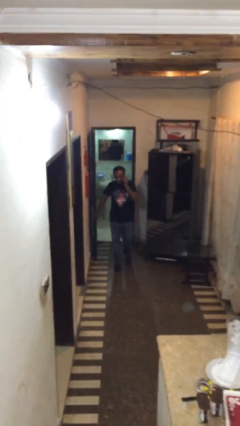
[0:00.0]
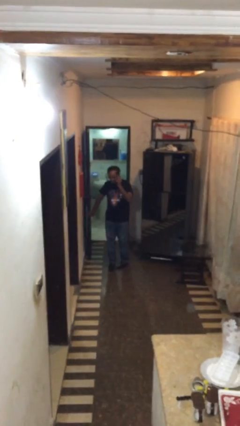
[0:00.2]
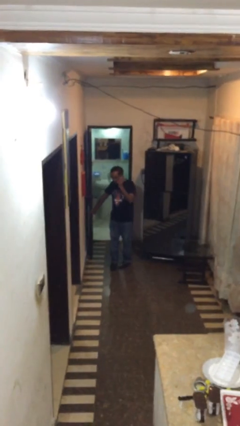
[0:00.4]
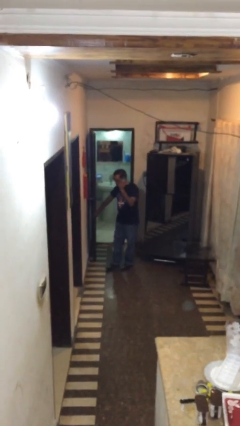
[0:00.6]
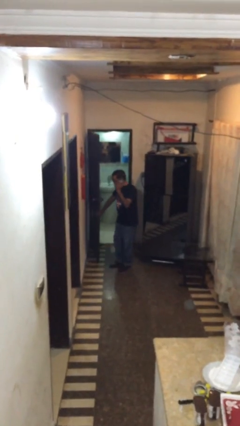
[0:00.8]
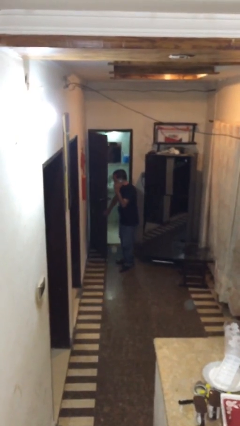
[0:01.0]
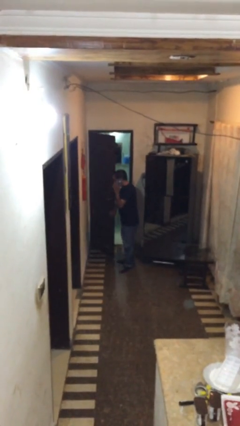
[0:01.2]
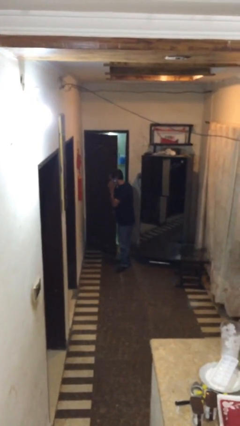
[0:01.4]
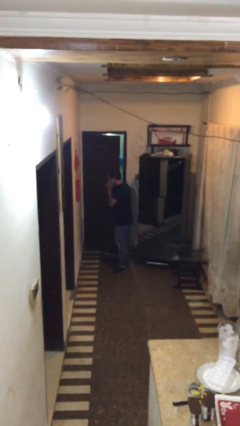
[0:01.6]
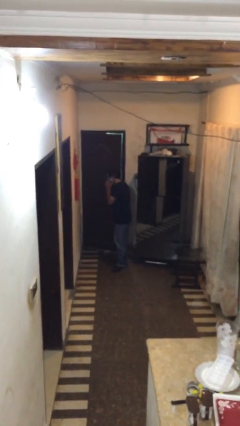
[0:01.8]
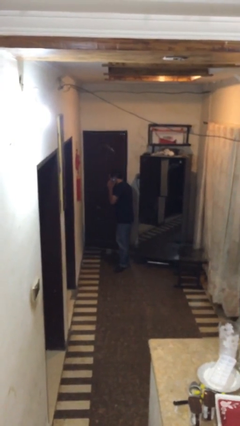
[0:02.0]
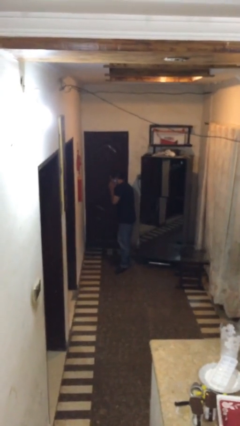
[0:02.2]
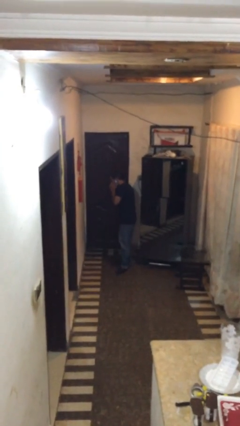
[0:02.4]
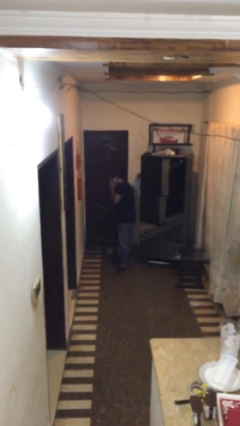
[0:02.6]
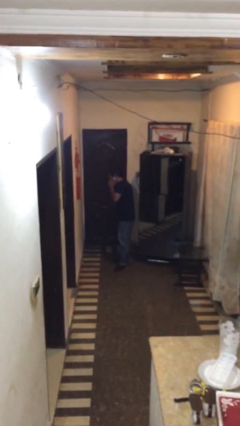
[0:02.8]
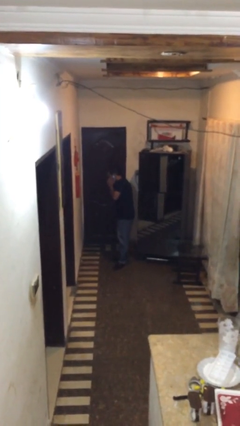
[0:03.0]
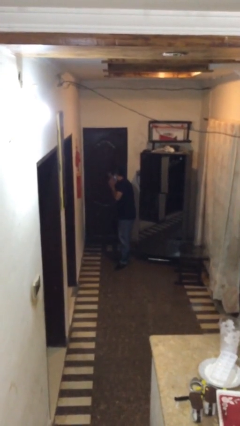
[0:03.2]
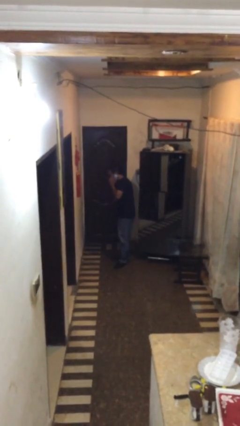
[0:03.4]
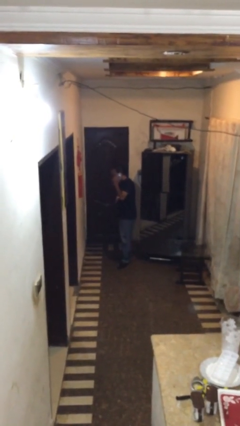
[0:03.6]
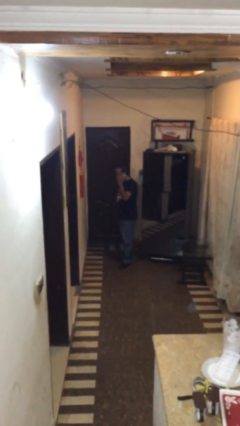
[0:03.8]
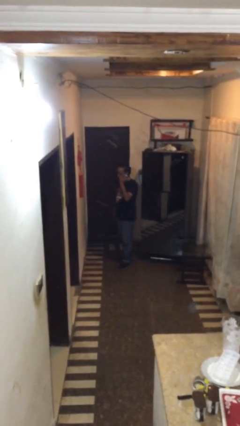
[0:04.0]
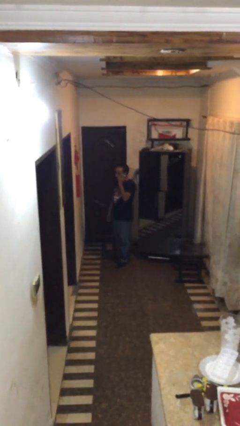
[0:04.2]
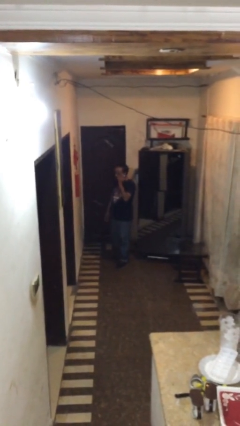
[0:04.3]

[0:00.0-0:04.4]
person closes facility door

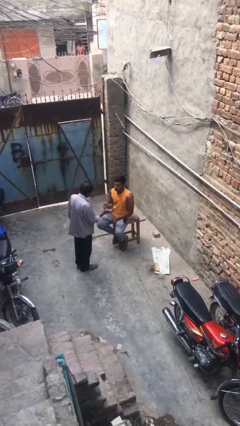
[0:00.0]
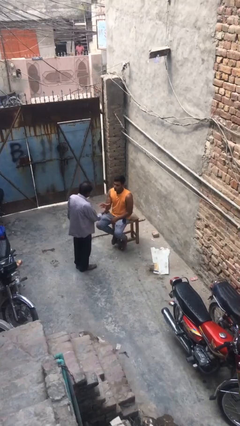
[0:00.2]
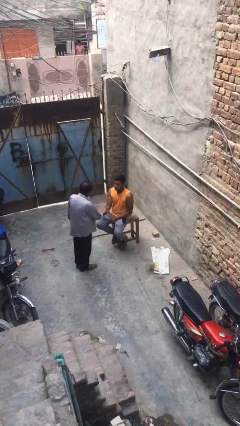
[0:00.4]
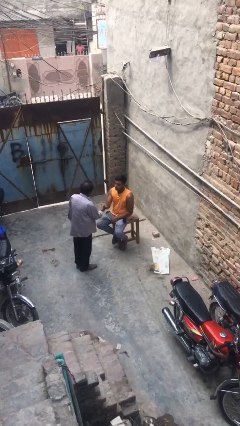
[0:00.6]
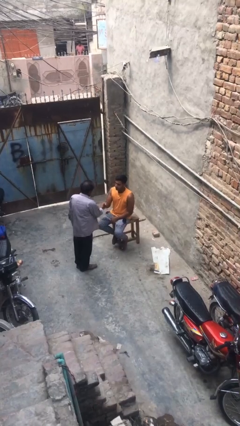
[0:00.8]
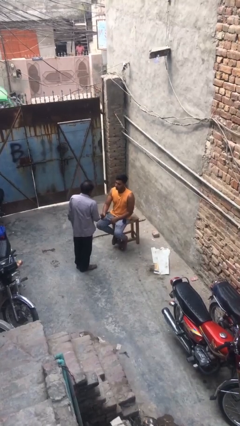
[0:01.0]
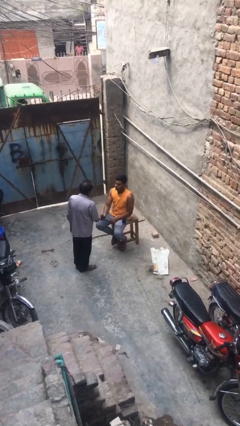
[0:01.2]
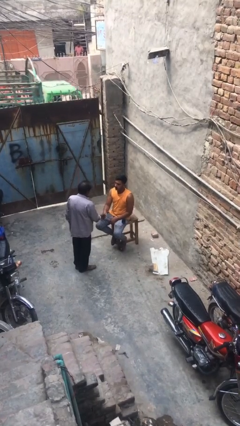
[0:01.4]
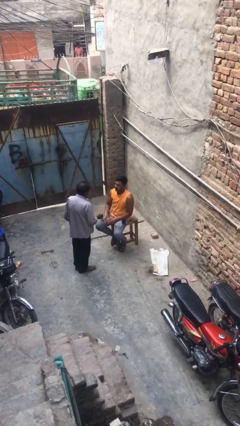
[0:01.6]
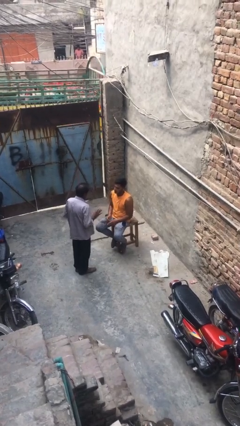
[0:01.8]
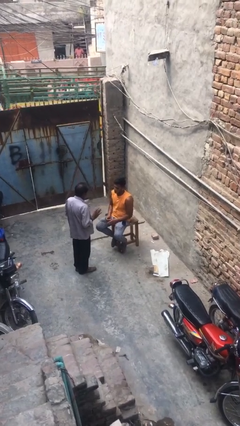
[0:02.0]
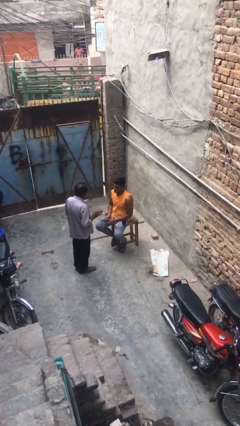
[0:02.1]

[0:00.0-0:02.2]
person shakes hand

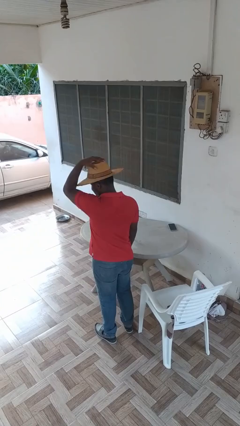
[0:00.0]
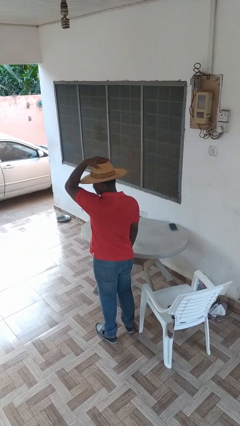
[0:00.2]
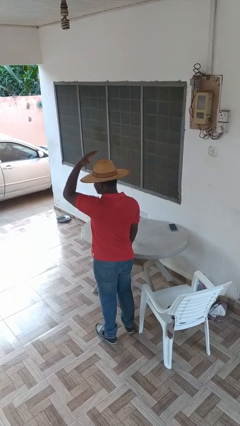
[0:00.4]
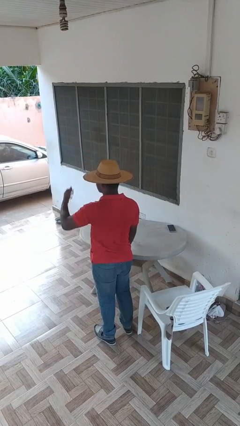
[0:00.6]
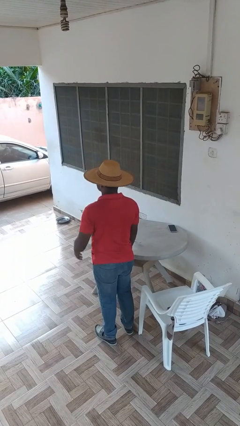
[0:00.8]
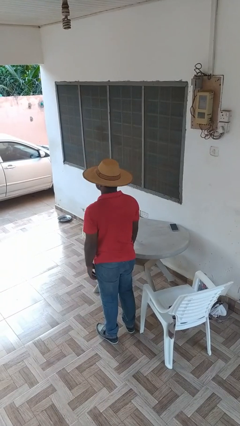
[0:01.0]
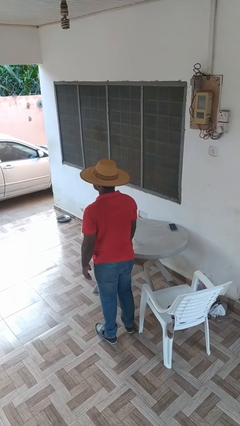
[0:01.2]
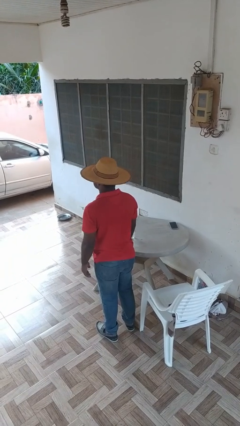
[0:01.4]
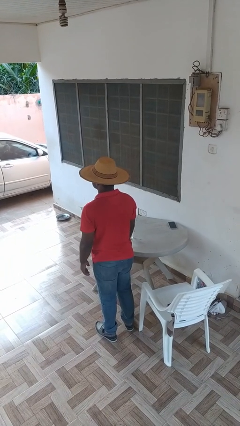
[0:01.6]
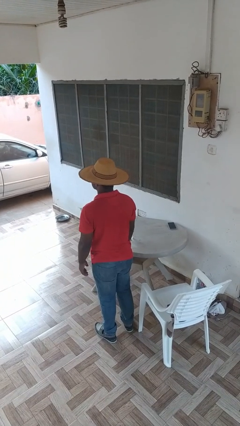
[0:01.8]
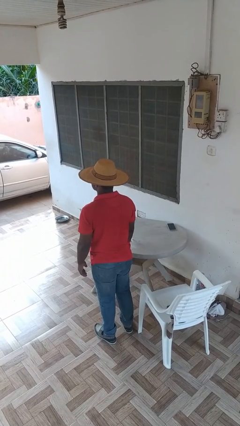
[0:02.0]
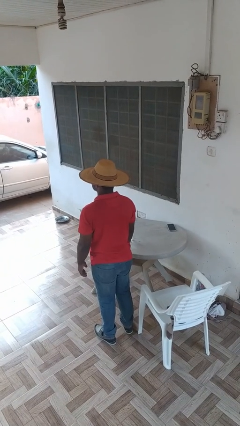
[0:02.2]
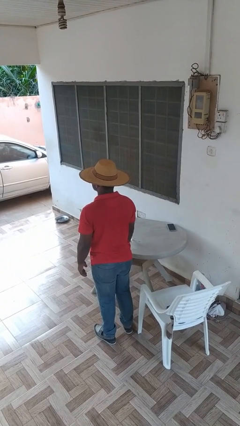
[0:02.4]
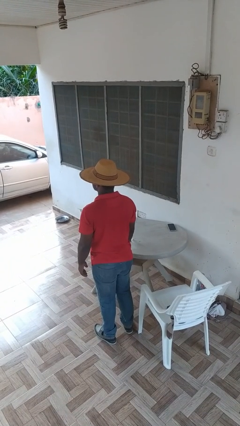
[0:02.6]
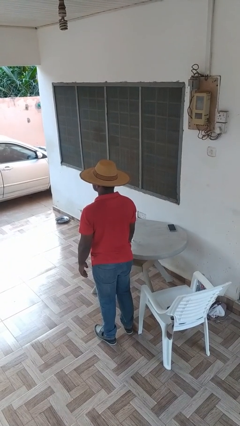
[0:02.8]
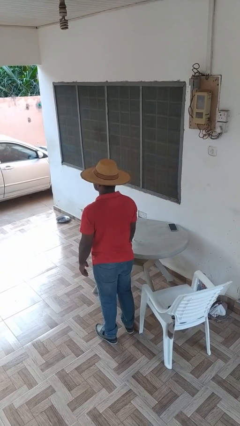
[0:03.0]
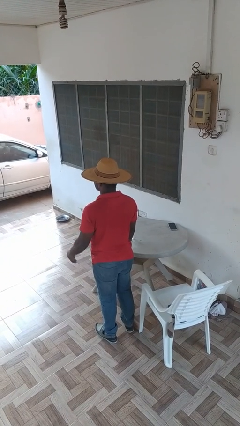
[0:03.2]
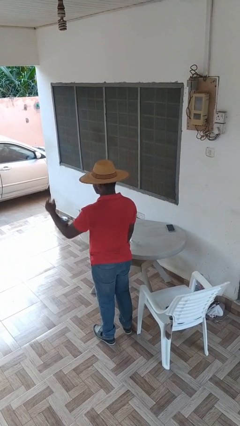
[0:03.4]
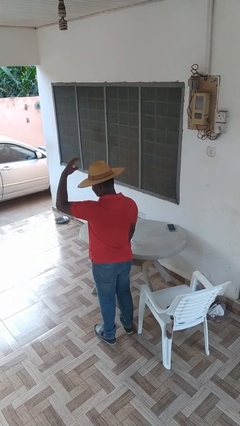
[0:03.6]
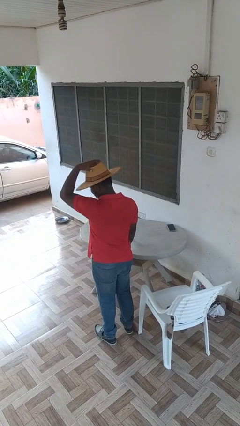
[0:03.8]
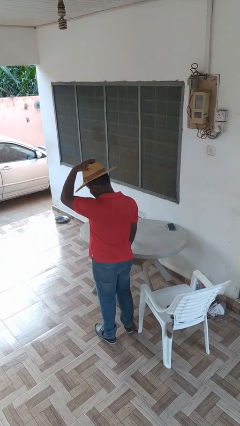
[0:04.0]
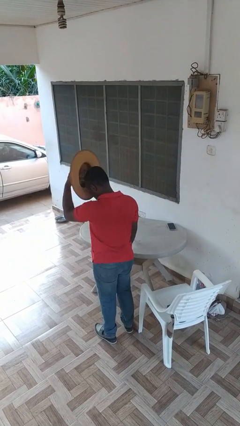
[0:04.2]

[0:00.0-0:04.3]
person puts on hat

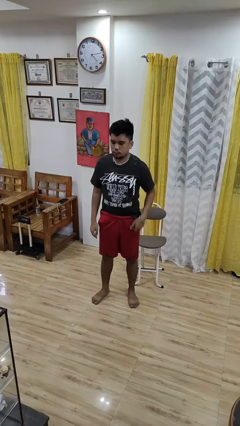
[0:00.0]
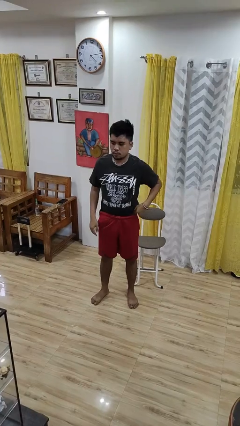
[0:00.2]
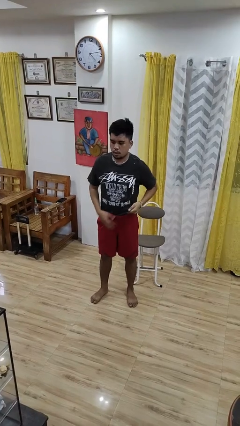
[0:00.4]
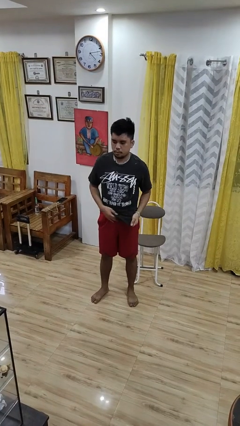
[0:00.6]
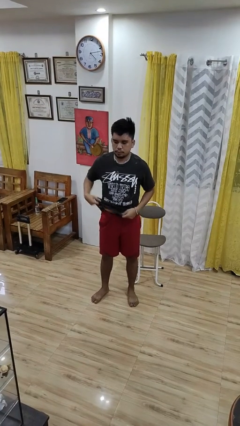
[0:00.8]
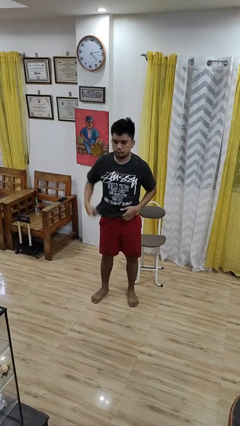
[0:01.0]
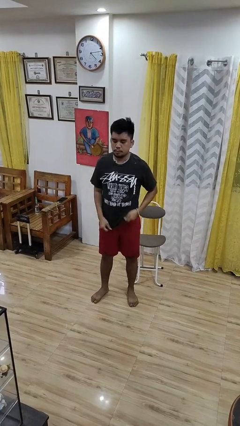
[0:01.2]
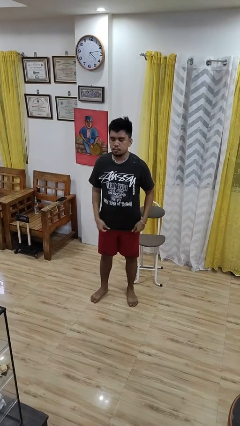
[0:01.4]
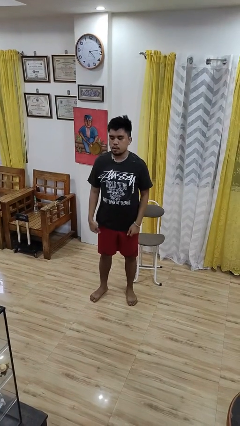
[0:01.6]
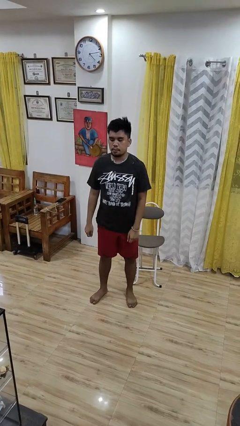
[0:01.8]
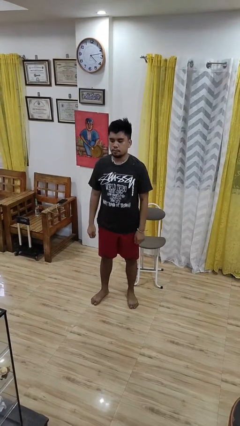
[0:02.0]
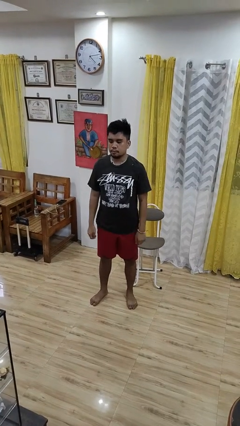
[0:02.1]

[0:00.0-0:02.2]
person untucks shirt

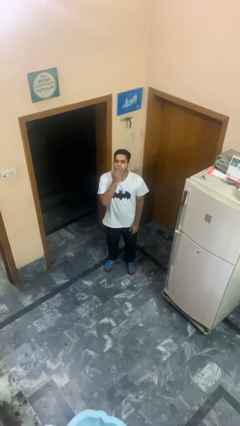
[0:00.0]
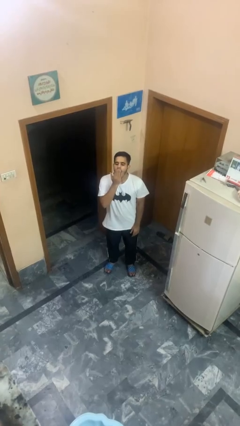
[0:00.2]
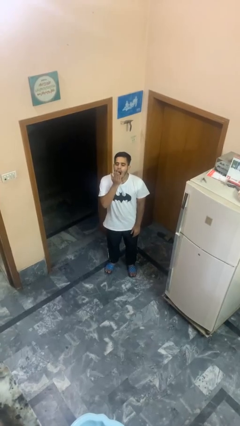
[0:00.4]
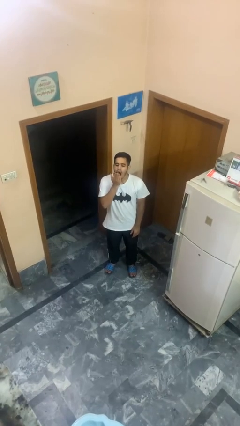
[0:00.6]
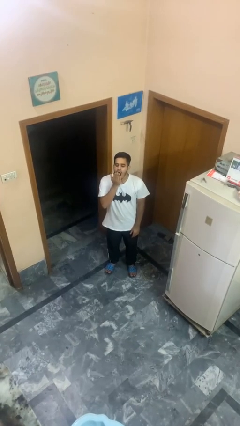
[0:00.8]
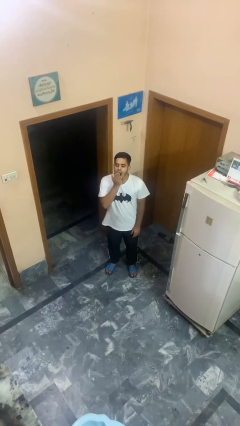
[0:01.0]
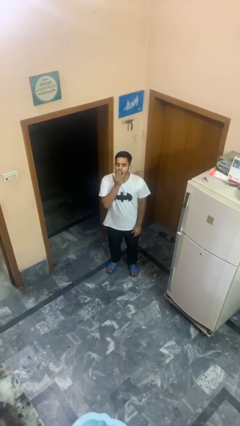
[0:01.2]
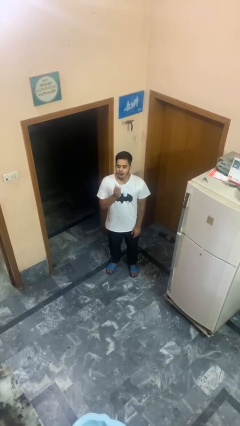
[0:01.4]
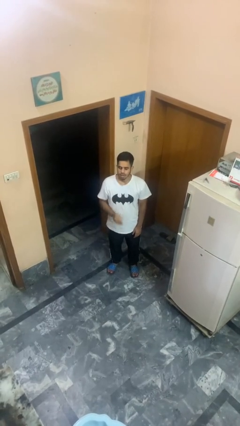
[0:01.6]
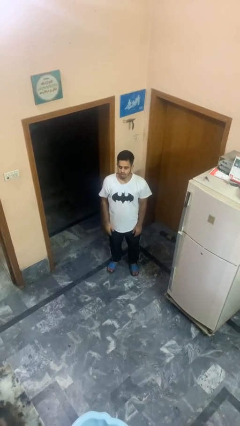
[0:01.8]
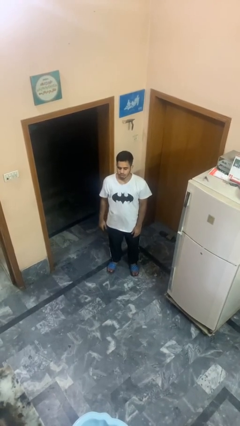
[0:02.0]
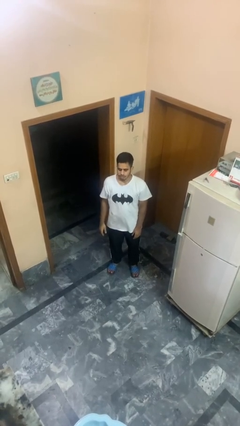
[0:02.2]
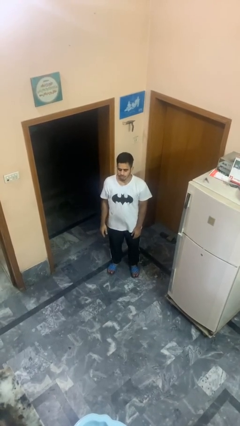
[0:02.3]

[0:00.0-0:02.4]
person yawns

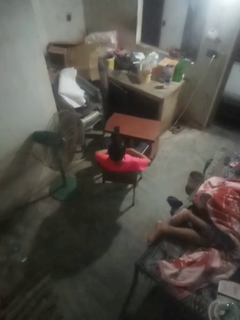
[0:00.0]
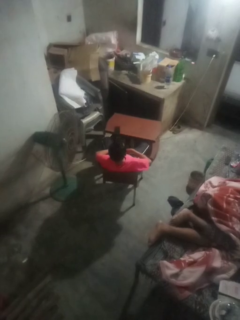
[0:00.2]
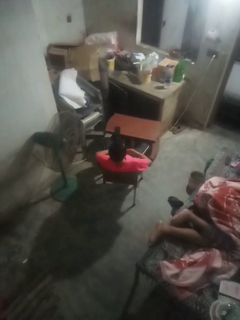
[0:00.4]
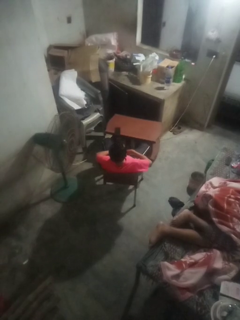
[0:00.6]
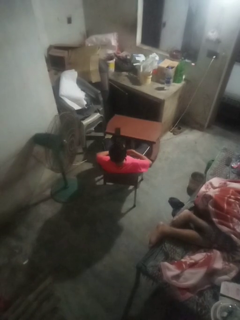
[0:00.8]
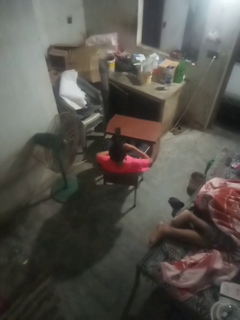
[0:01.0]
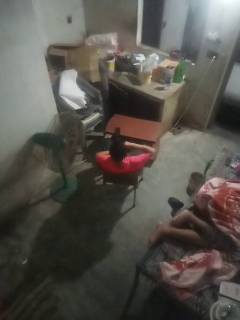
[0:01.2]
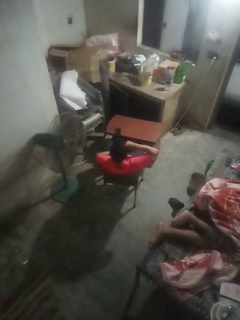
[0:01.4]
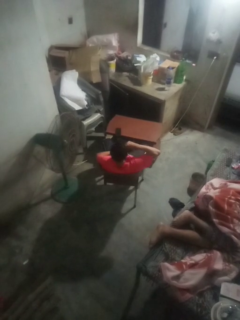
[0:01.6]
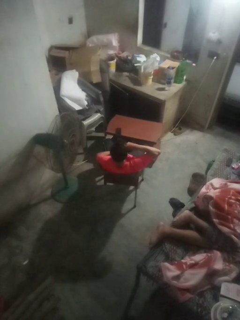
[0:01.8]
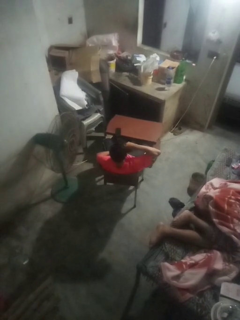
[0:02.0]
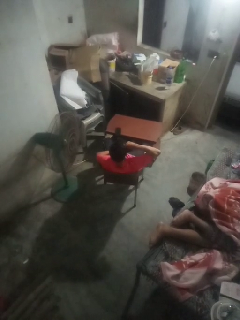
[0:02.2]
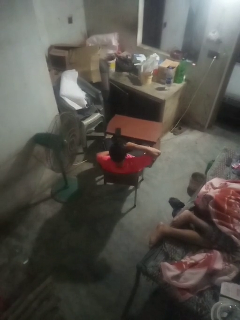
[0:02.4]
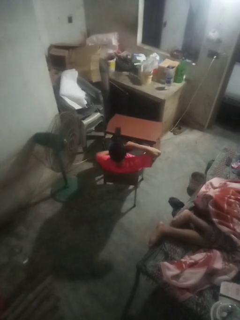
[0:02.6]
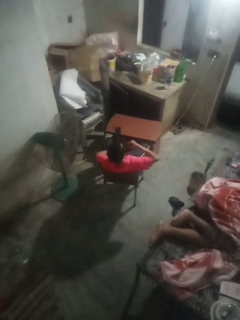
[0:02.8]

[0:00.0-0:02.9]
person licks fingers
